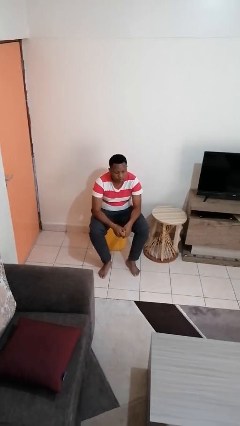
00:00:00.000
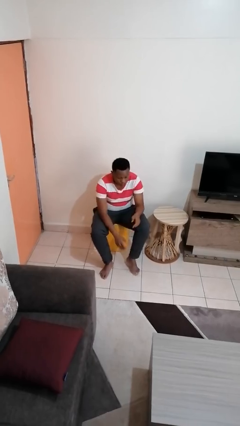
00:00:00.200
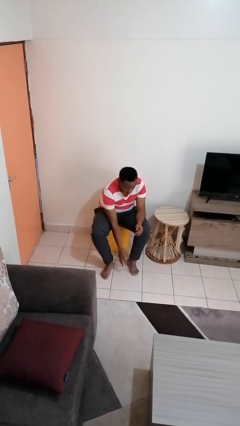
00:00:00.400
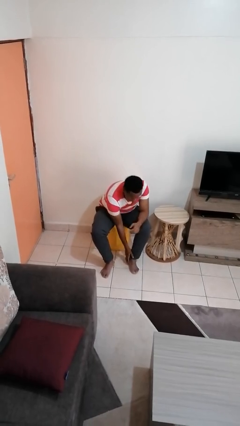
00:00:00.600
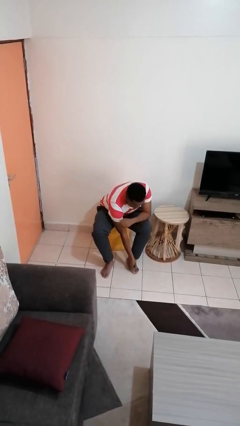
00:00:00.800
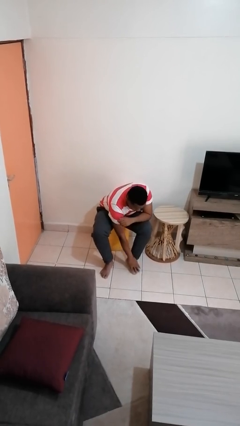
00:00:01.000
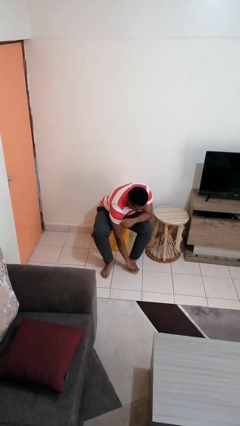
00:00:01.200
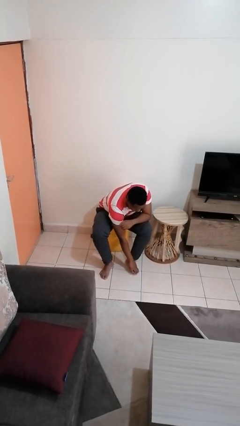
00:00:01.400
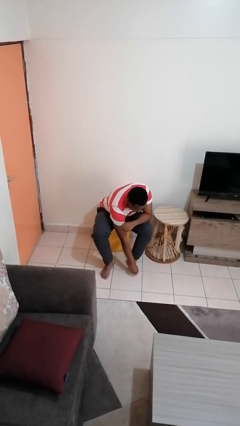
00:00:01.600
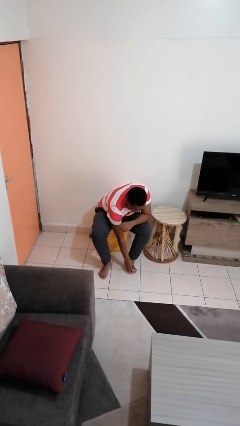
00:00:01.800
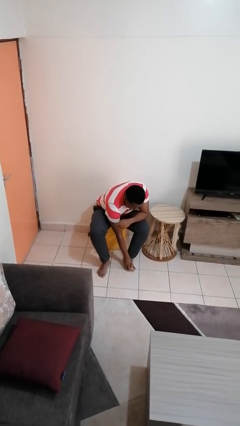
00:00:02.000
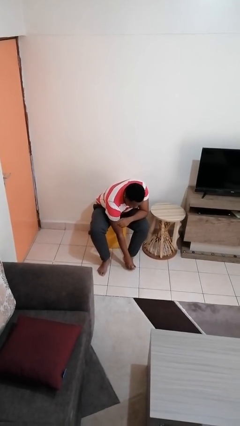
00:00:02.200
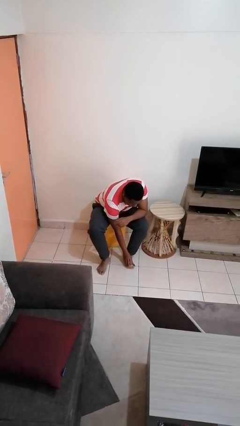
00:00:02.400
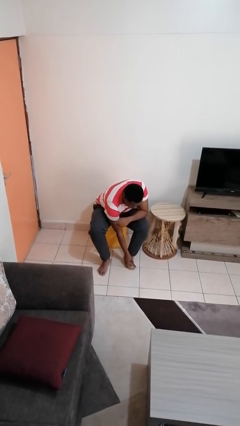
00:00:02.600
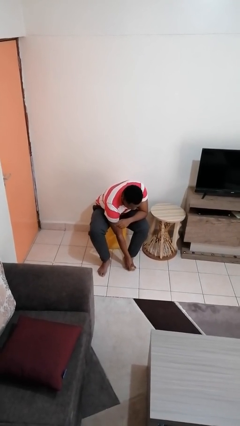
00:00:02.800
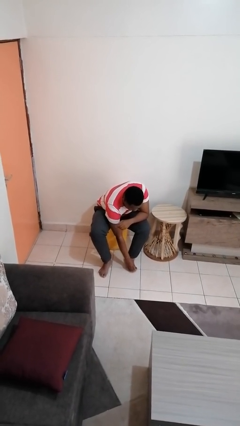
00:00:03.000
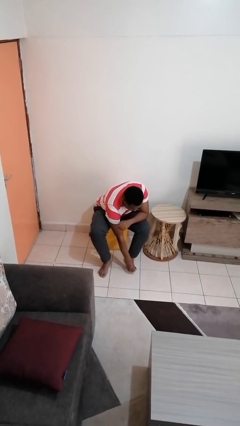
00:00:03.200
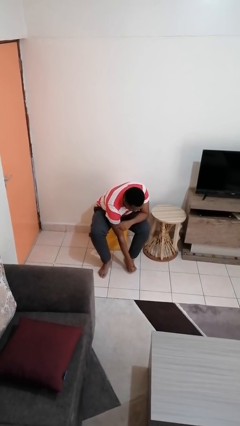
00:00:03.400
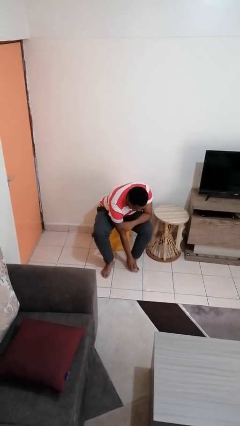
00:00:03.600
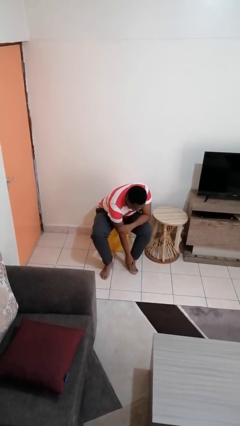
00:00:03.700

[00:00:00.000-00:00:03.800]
person rubs foot

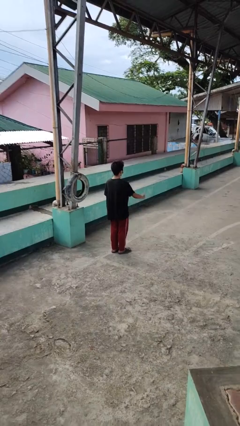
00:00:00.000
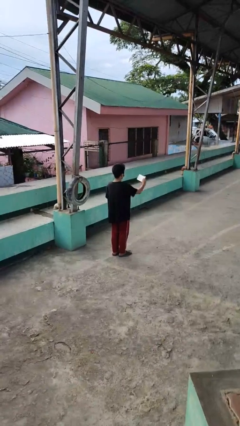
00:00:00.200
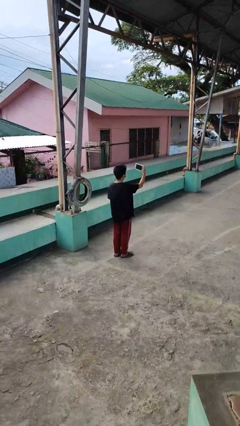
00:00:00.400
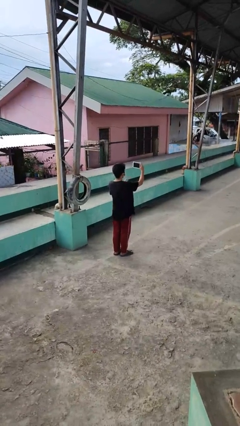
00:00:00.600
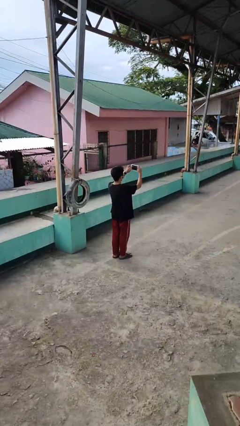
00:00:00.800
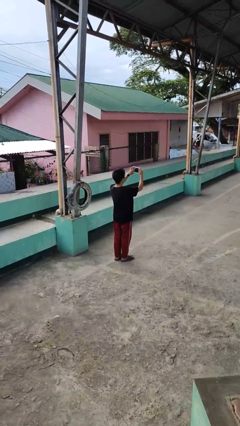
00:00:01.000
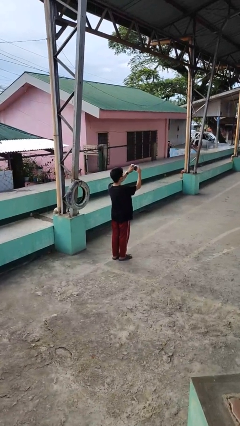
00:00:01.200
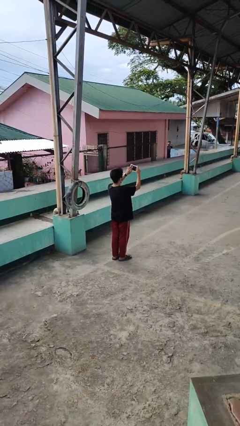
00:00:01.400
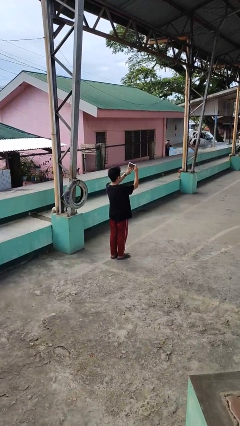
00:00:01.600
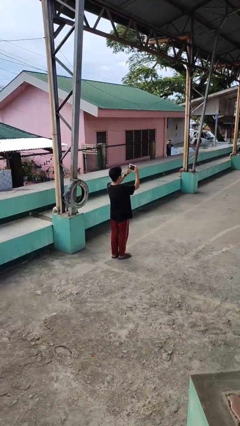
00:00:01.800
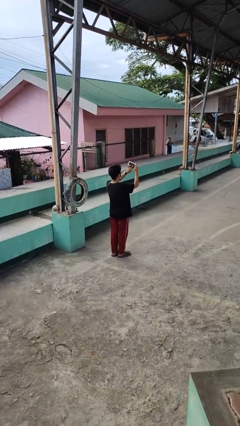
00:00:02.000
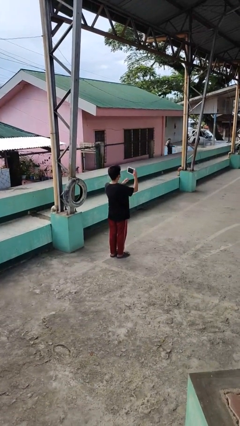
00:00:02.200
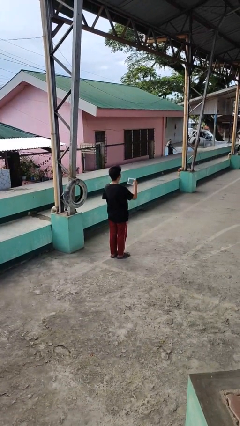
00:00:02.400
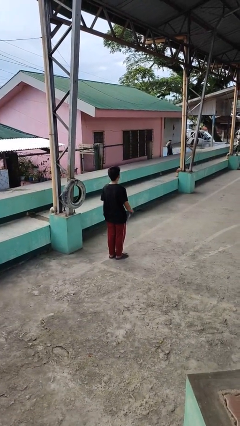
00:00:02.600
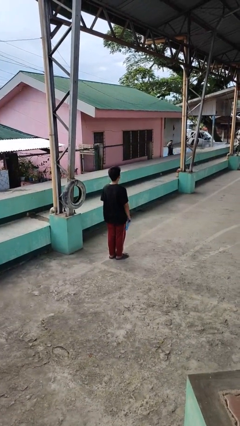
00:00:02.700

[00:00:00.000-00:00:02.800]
person interacts with tablet

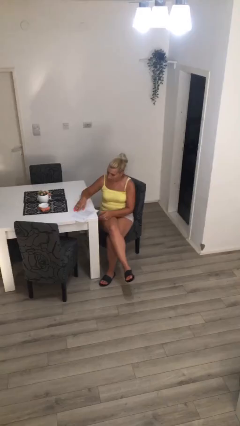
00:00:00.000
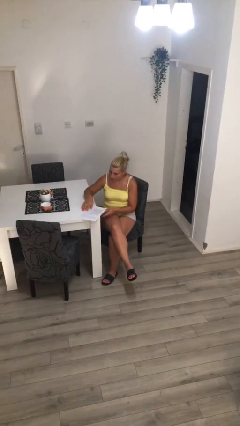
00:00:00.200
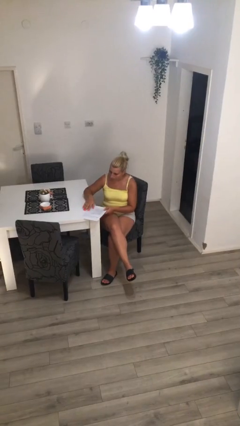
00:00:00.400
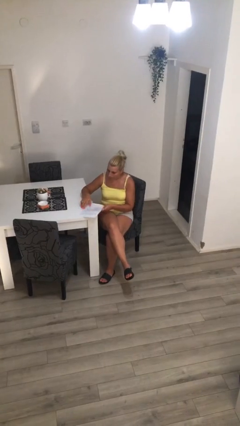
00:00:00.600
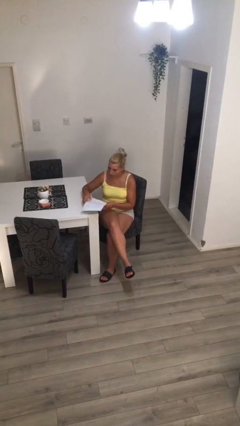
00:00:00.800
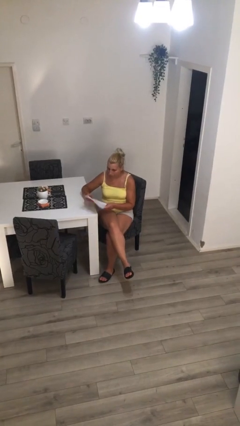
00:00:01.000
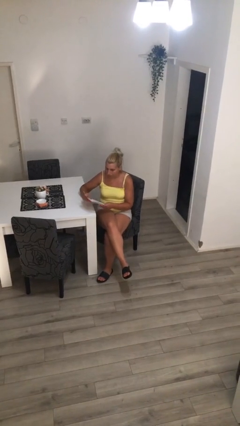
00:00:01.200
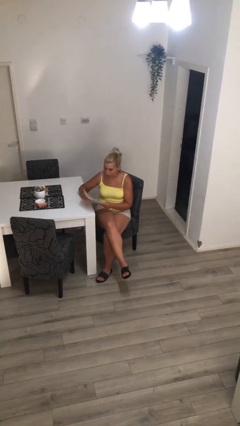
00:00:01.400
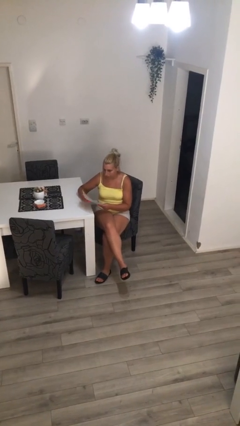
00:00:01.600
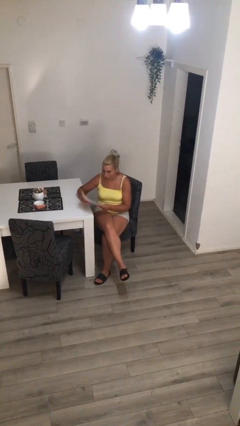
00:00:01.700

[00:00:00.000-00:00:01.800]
person picks up object from table

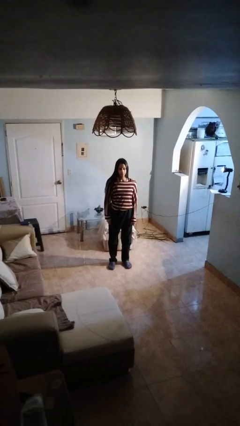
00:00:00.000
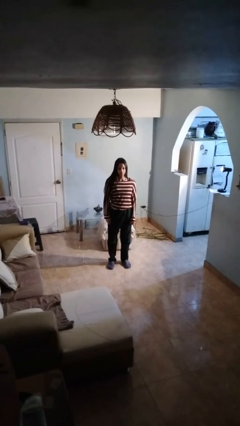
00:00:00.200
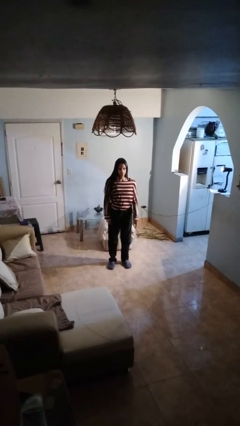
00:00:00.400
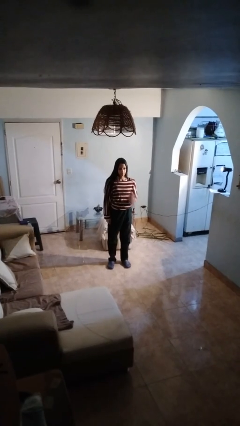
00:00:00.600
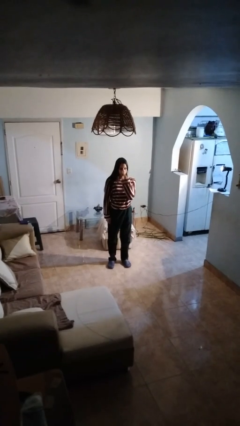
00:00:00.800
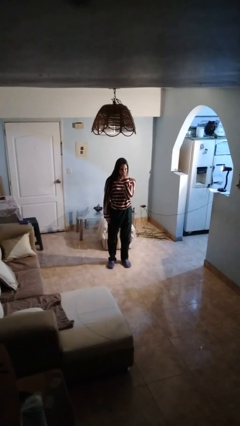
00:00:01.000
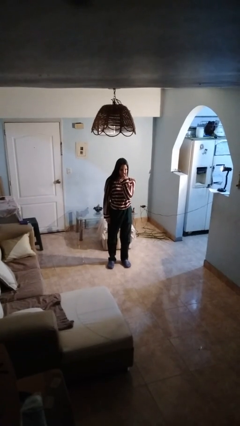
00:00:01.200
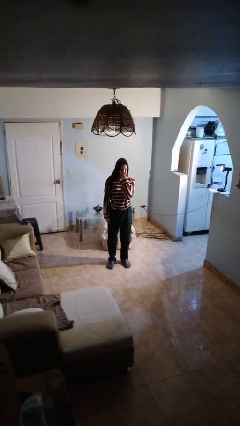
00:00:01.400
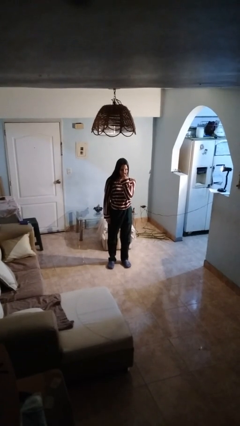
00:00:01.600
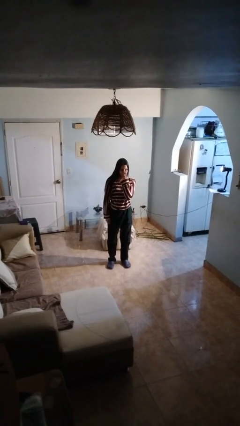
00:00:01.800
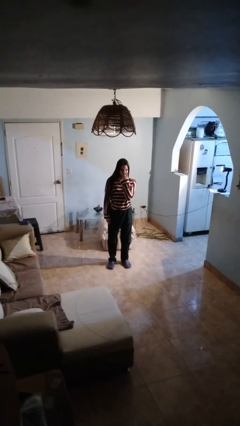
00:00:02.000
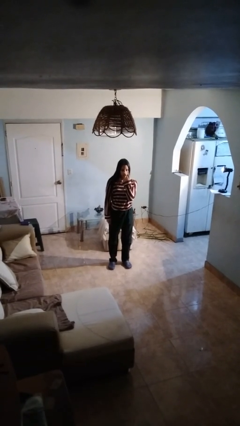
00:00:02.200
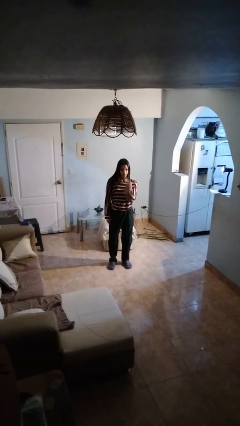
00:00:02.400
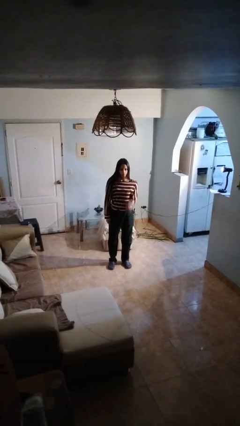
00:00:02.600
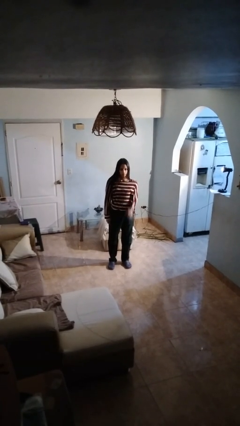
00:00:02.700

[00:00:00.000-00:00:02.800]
person gestures watch closely

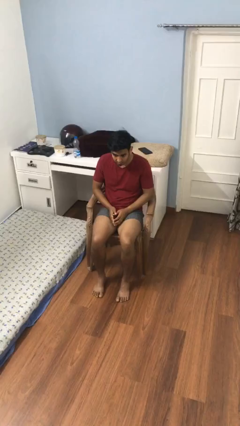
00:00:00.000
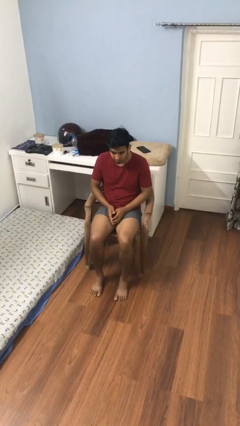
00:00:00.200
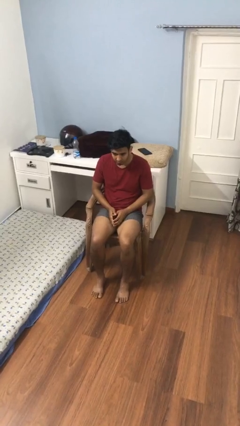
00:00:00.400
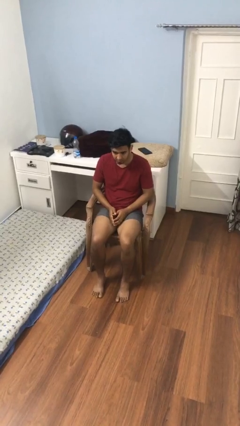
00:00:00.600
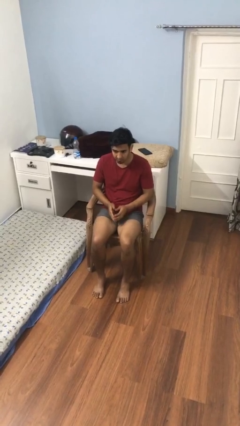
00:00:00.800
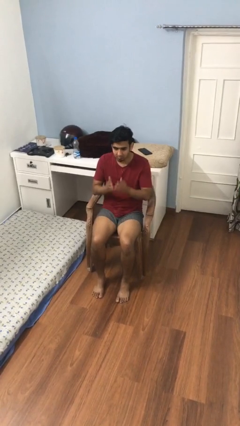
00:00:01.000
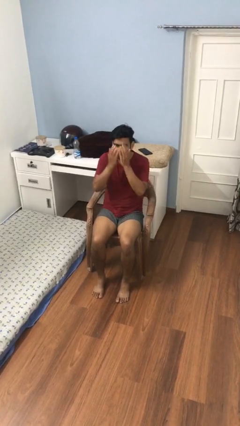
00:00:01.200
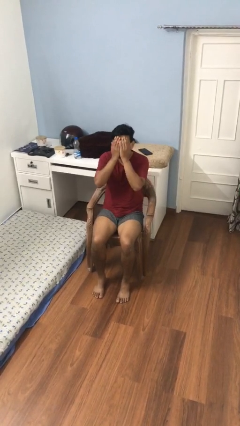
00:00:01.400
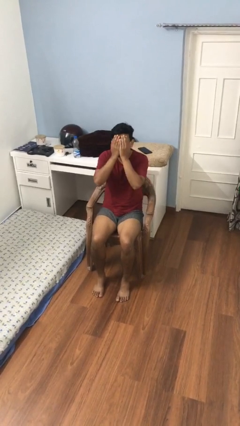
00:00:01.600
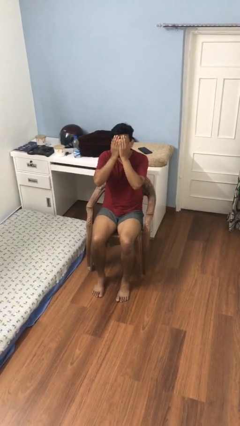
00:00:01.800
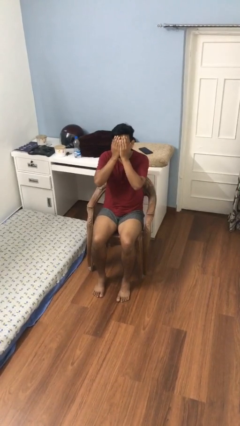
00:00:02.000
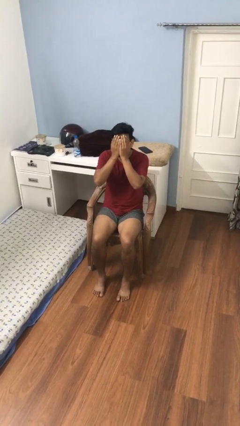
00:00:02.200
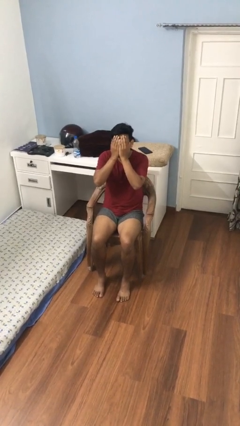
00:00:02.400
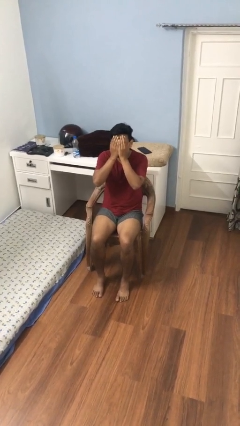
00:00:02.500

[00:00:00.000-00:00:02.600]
person covers face with hands

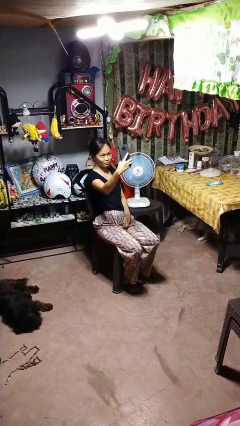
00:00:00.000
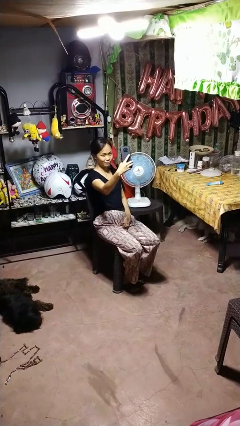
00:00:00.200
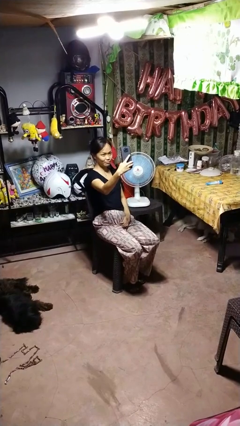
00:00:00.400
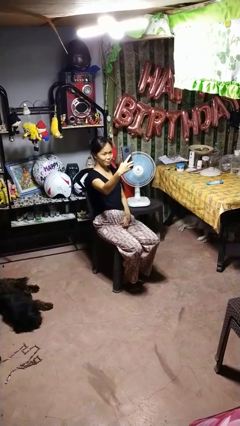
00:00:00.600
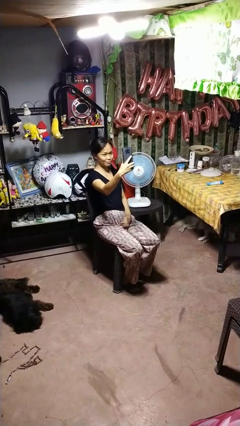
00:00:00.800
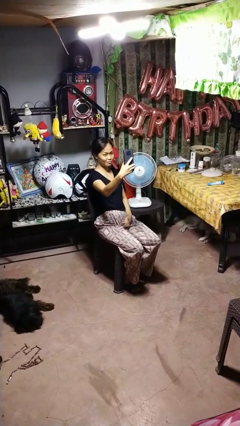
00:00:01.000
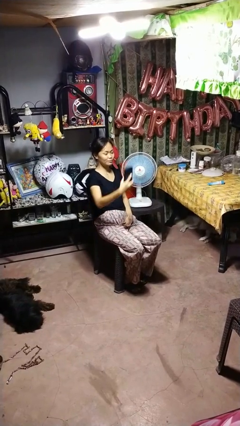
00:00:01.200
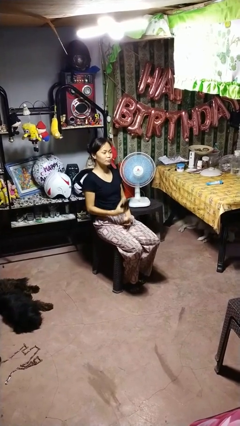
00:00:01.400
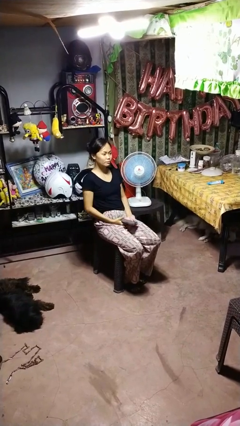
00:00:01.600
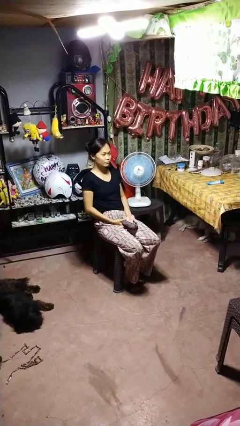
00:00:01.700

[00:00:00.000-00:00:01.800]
person takes selfie

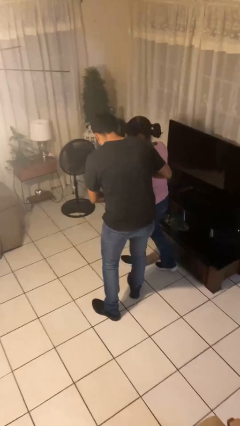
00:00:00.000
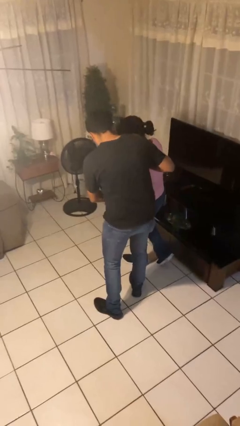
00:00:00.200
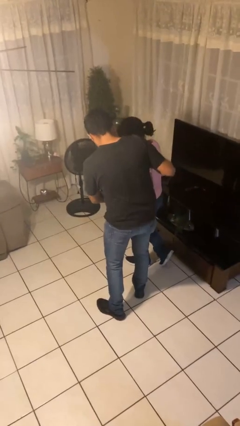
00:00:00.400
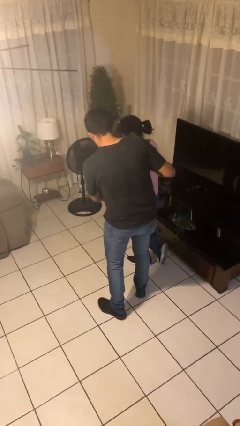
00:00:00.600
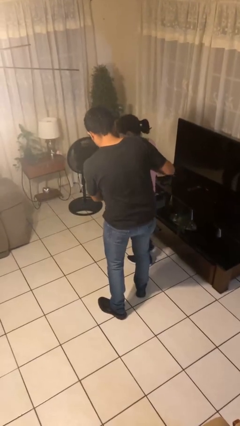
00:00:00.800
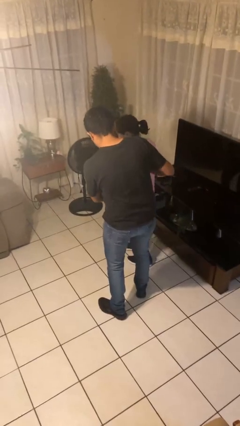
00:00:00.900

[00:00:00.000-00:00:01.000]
person bumps into person

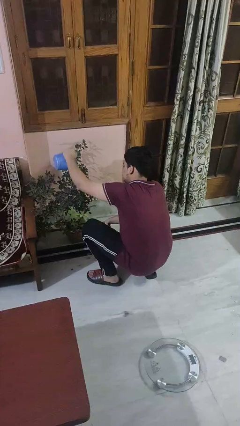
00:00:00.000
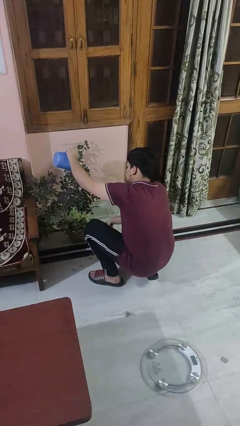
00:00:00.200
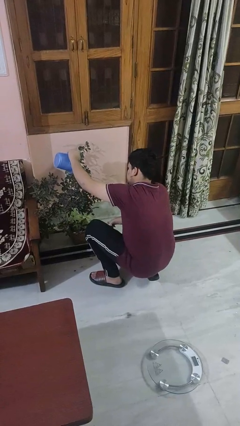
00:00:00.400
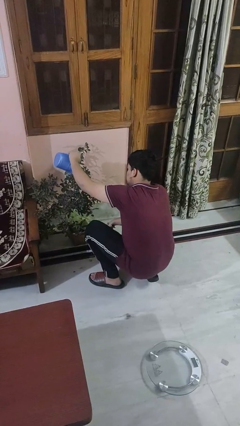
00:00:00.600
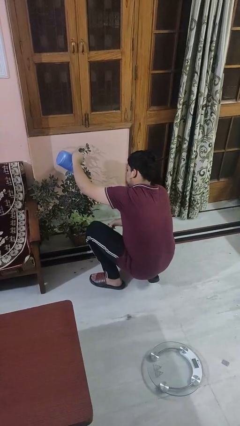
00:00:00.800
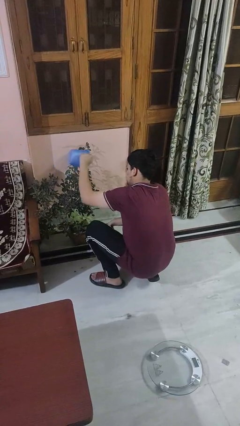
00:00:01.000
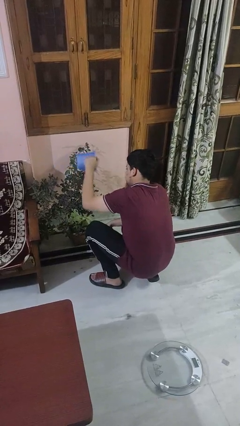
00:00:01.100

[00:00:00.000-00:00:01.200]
person waters houseplant
